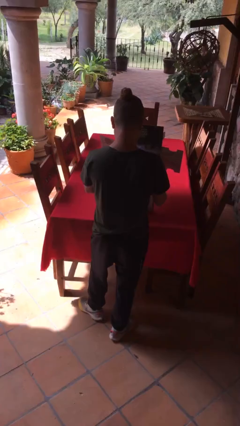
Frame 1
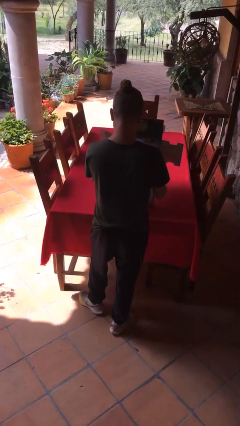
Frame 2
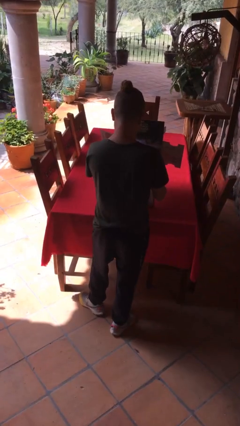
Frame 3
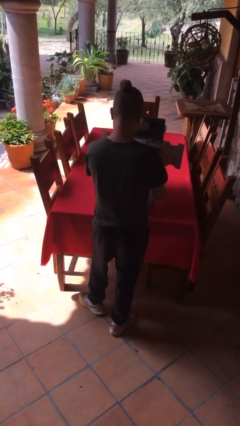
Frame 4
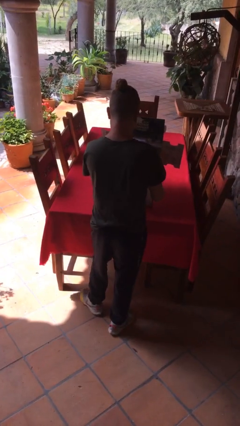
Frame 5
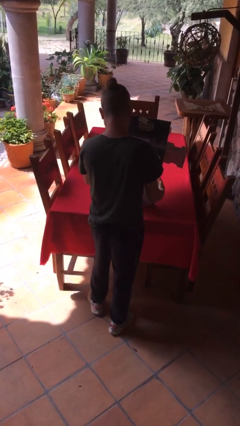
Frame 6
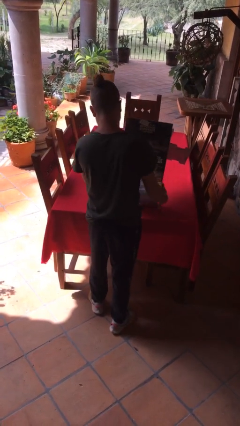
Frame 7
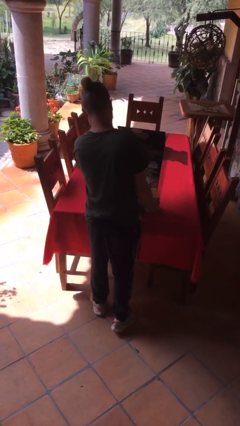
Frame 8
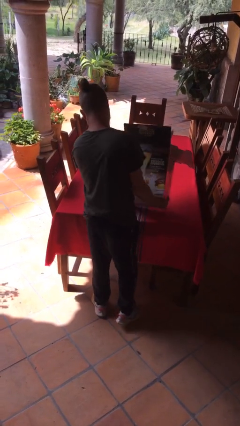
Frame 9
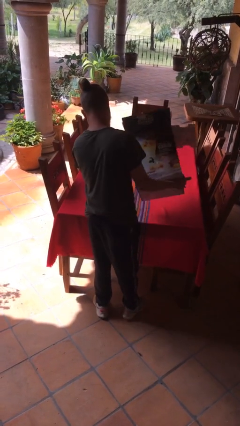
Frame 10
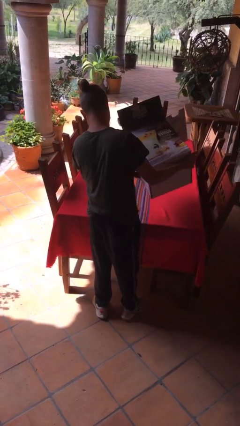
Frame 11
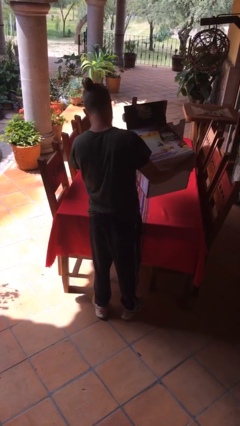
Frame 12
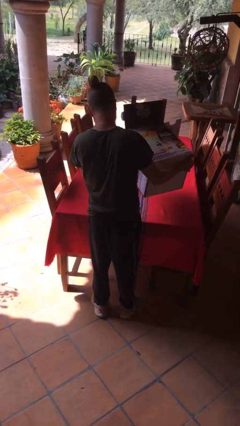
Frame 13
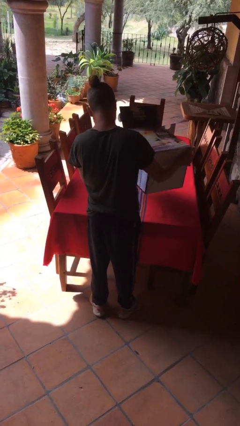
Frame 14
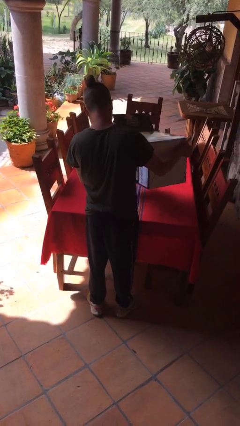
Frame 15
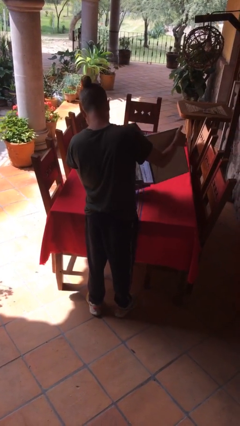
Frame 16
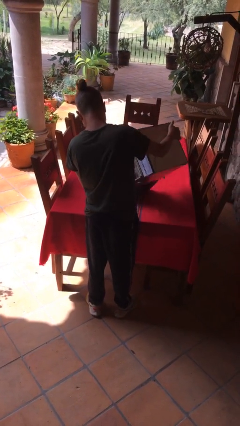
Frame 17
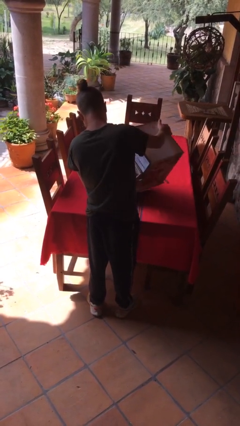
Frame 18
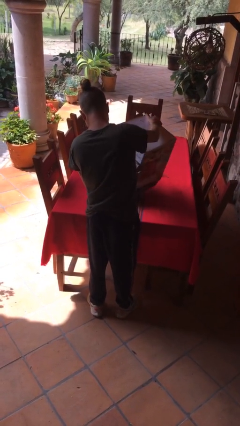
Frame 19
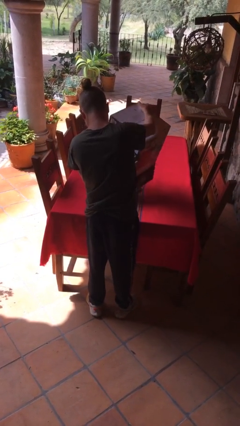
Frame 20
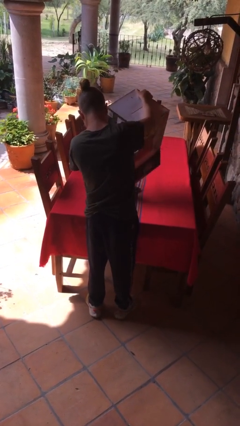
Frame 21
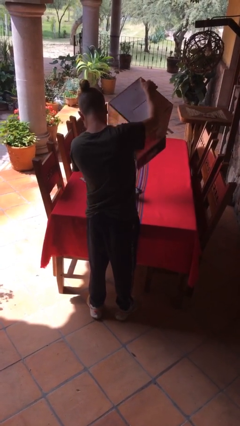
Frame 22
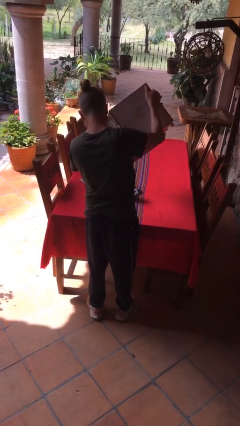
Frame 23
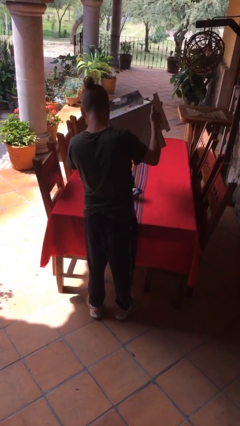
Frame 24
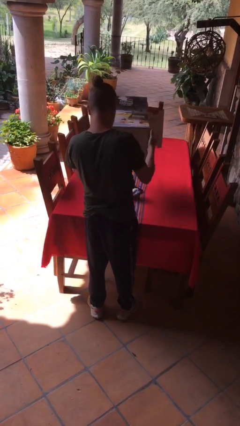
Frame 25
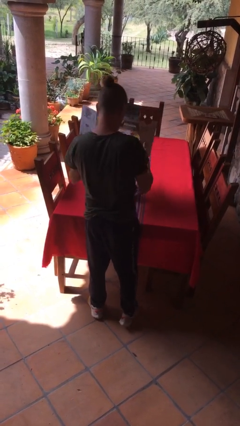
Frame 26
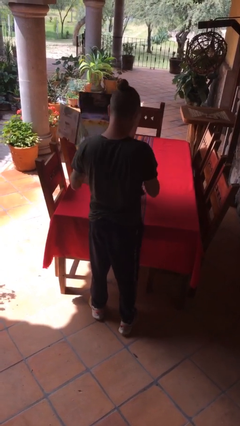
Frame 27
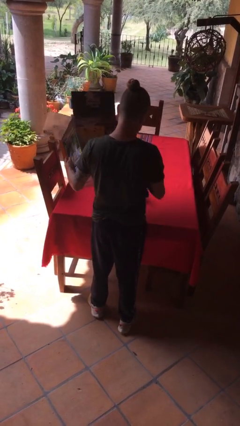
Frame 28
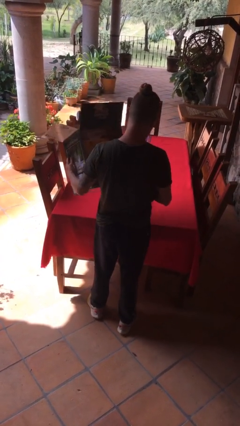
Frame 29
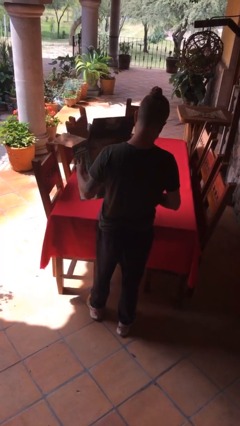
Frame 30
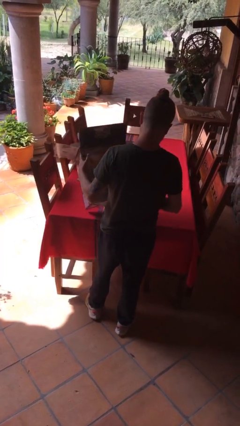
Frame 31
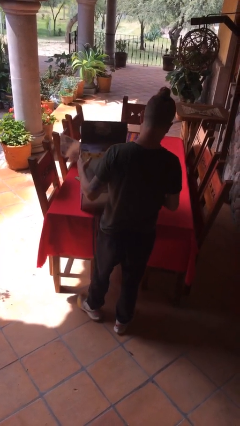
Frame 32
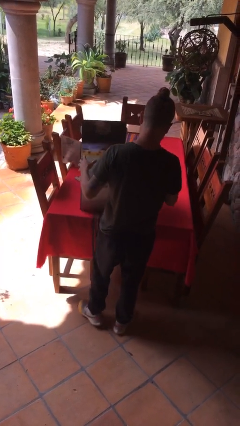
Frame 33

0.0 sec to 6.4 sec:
person unloads box onto table

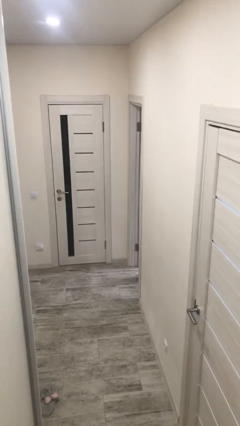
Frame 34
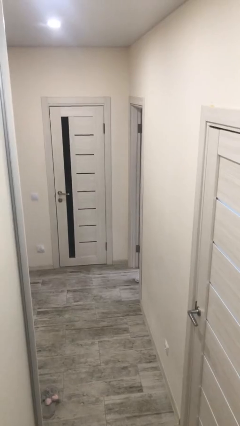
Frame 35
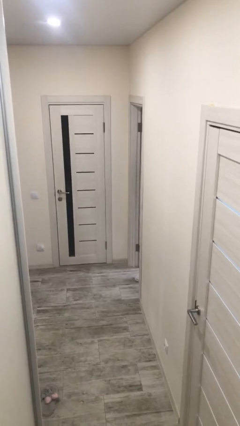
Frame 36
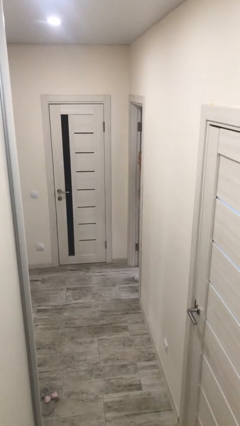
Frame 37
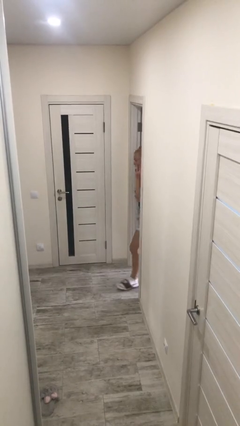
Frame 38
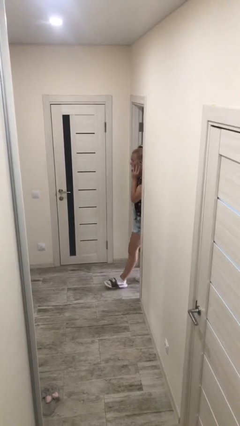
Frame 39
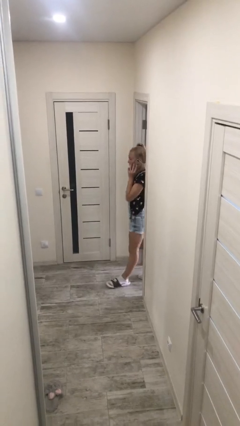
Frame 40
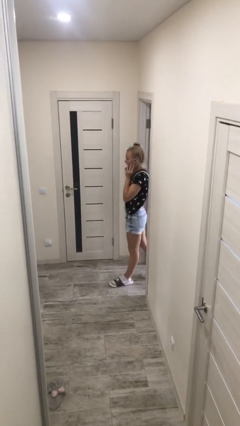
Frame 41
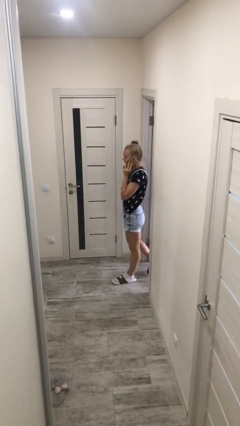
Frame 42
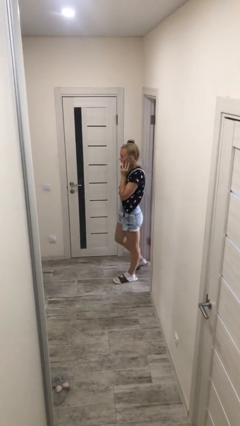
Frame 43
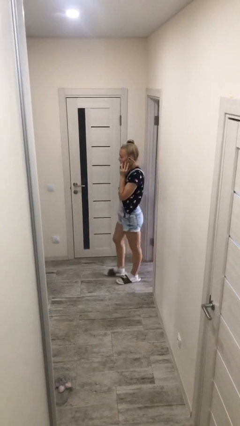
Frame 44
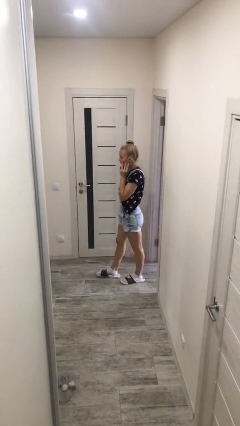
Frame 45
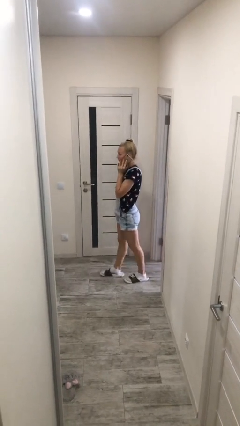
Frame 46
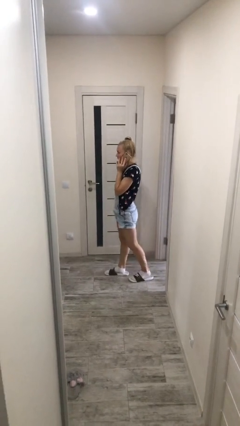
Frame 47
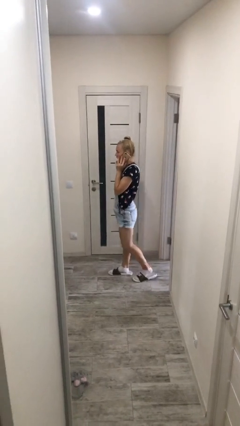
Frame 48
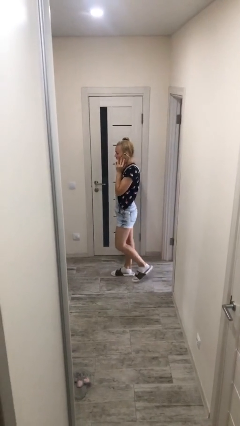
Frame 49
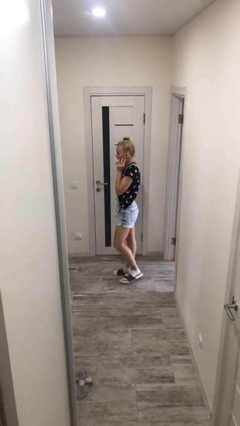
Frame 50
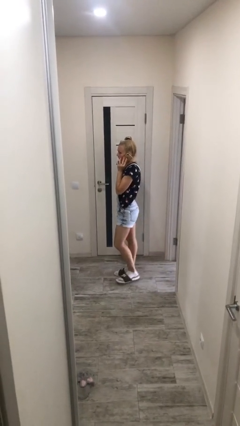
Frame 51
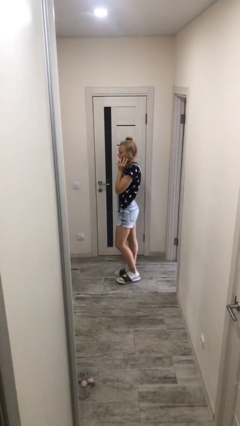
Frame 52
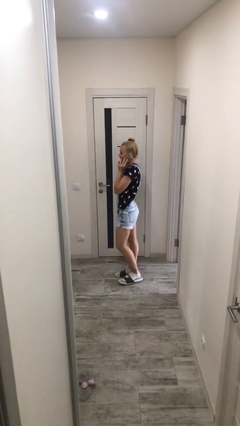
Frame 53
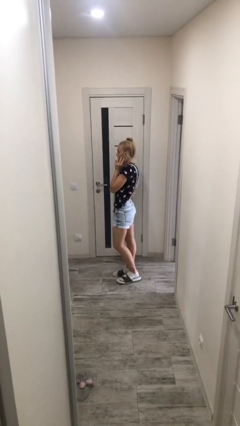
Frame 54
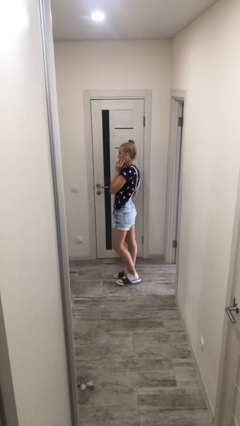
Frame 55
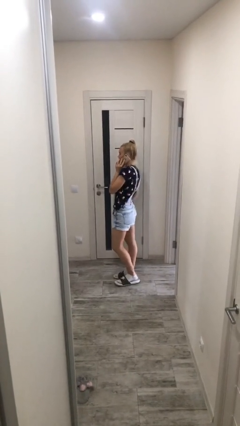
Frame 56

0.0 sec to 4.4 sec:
person enters scene through structure

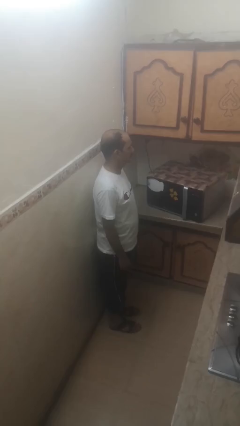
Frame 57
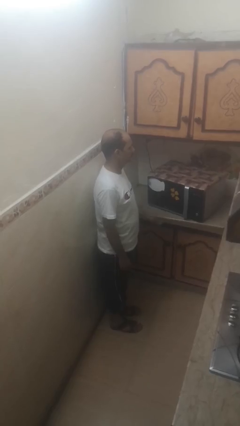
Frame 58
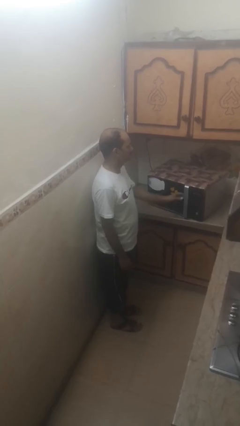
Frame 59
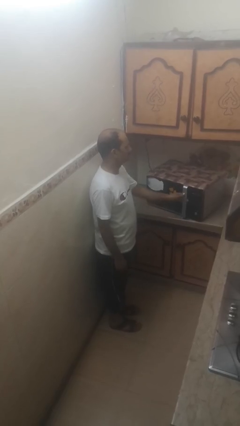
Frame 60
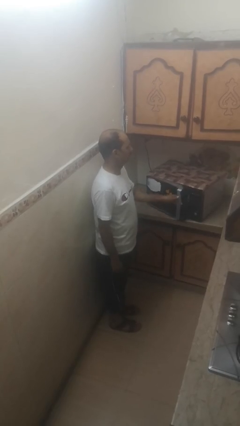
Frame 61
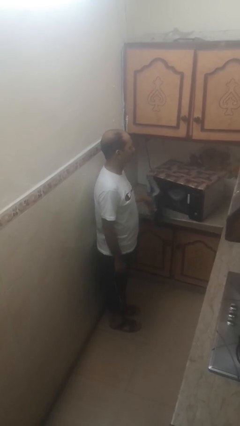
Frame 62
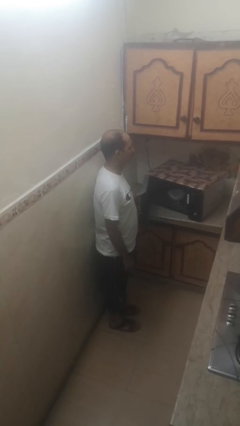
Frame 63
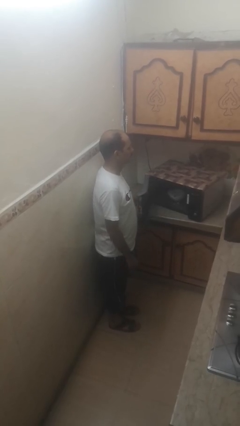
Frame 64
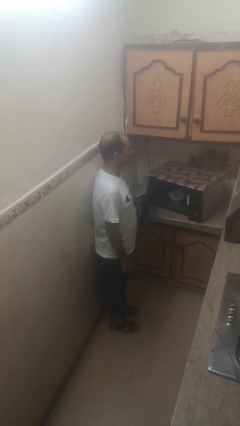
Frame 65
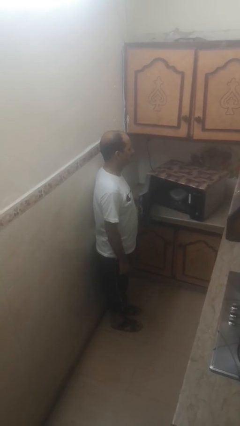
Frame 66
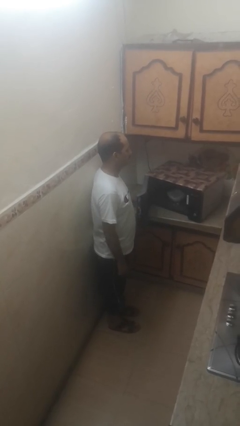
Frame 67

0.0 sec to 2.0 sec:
person opens microwave

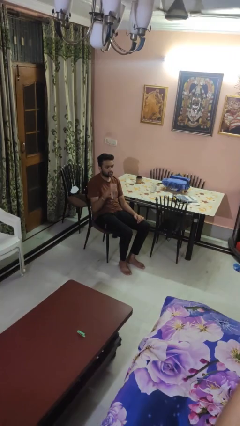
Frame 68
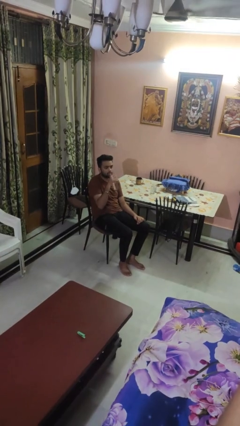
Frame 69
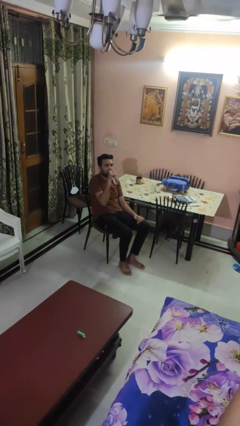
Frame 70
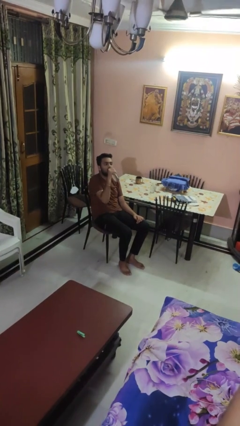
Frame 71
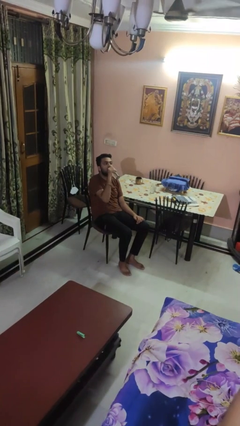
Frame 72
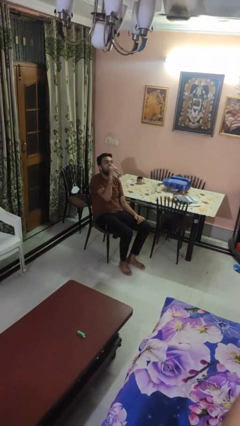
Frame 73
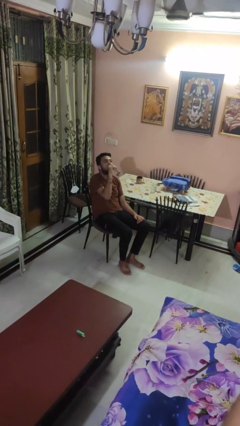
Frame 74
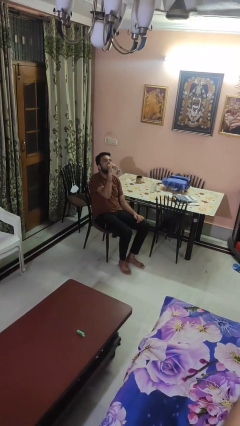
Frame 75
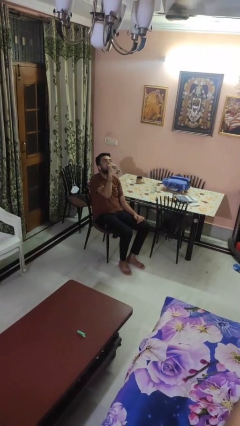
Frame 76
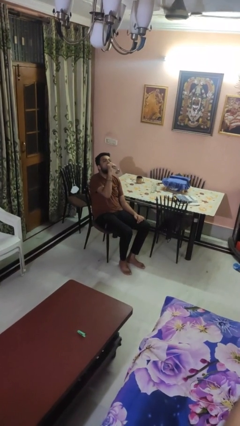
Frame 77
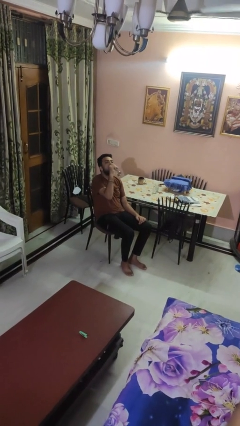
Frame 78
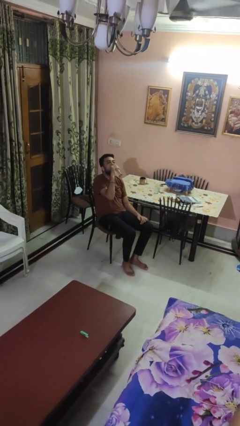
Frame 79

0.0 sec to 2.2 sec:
person drinks from bottle

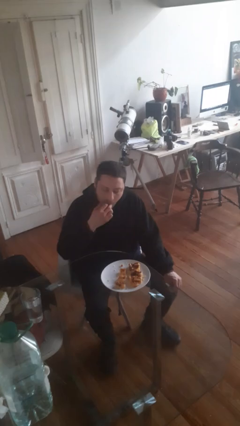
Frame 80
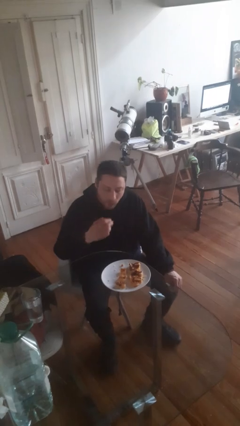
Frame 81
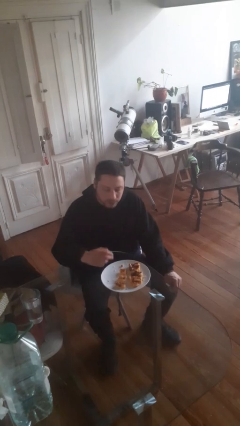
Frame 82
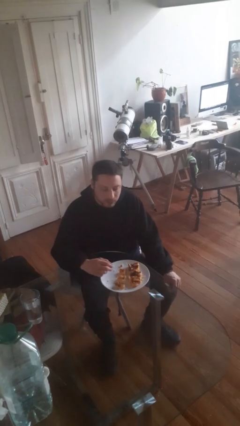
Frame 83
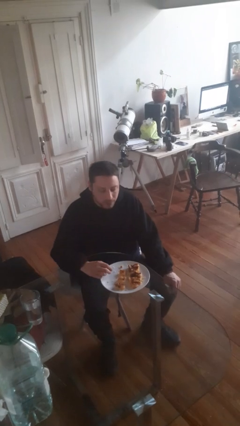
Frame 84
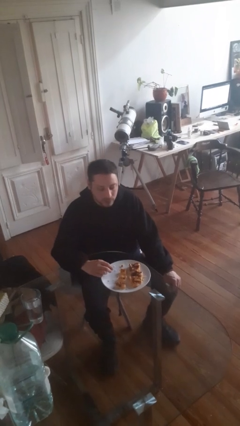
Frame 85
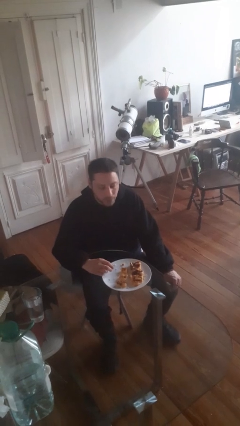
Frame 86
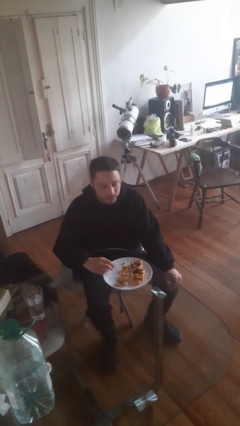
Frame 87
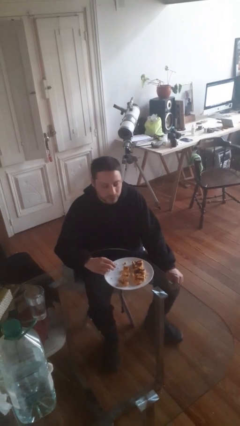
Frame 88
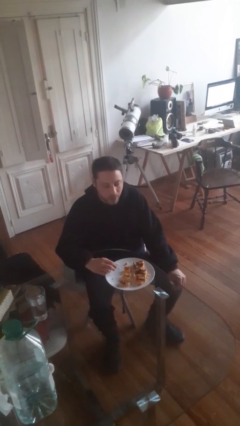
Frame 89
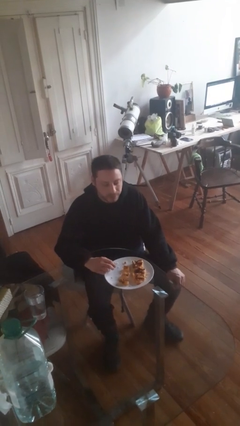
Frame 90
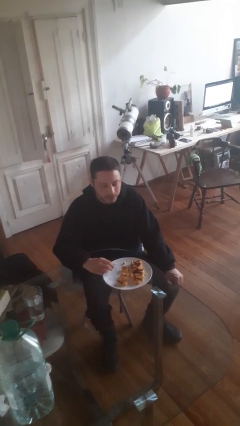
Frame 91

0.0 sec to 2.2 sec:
person eats with hands

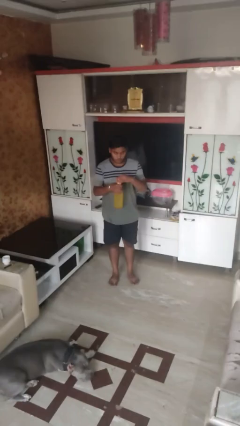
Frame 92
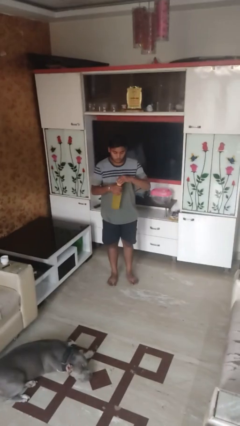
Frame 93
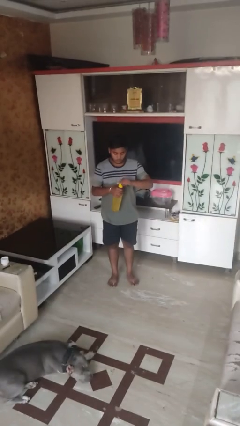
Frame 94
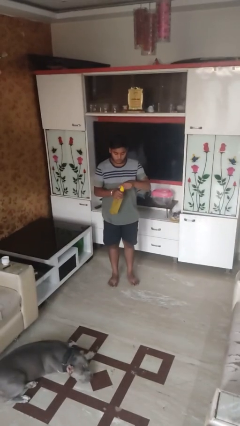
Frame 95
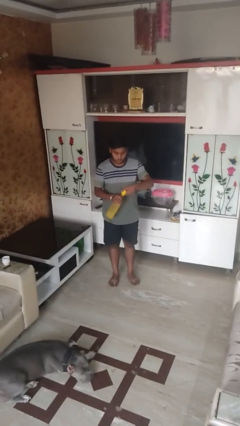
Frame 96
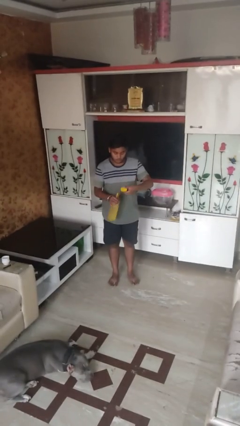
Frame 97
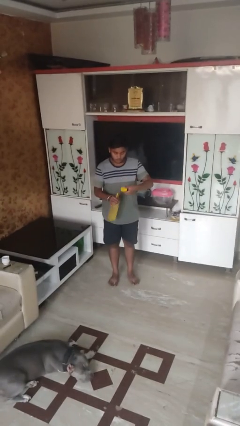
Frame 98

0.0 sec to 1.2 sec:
person unscrews lid from bottle
